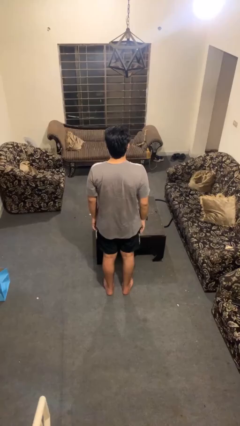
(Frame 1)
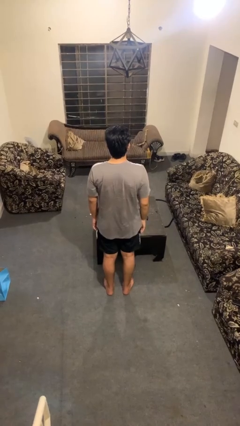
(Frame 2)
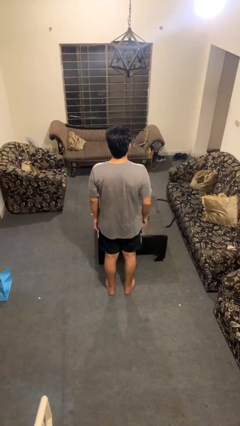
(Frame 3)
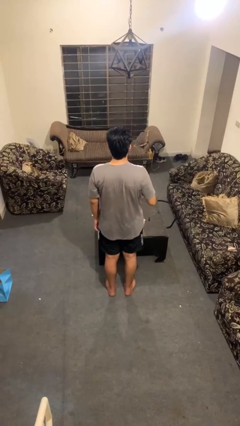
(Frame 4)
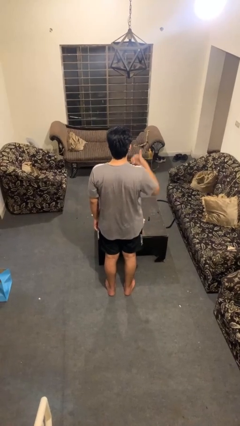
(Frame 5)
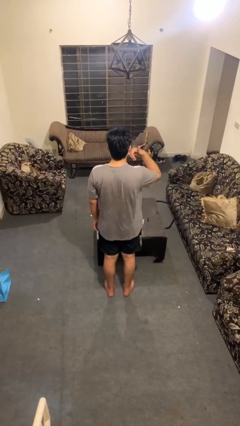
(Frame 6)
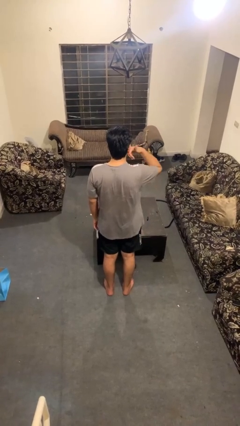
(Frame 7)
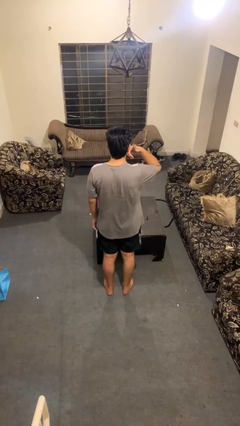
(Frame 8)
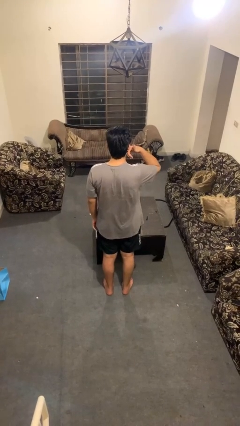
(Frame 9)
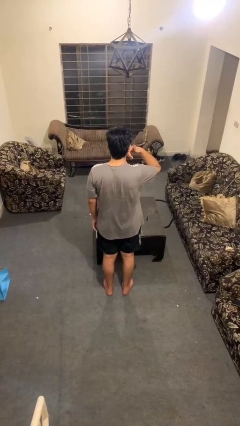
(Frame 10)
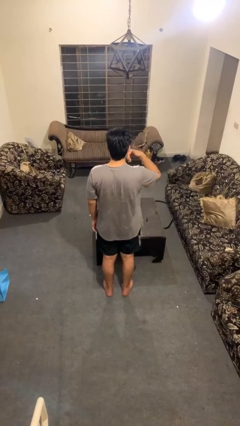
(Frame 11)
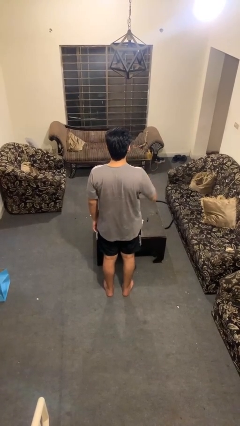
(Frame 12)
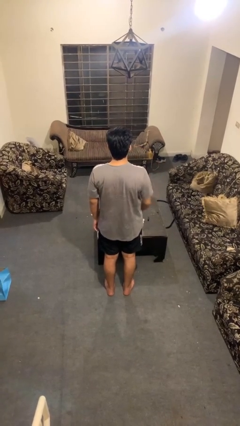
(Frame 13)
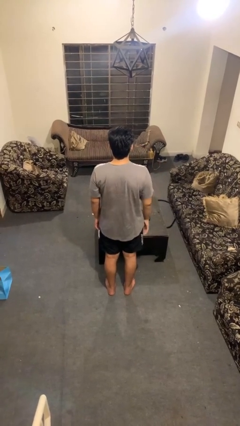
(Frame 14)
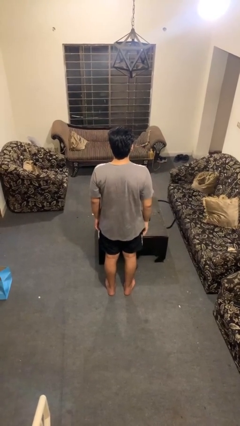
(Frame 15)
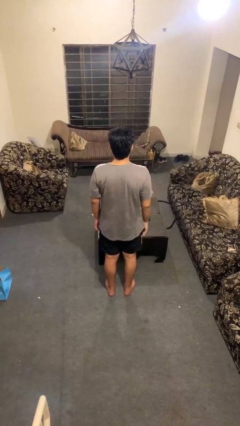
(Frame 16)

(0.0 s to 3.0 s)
person gestures call me

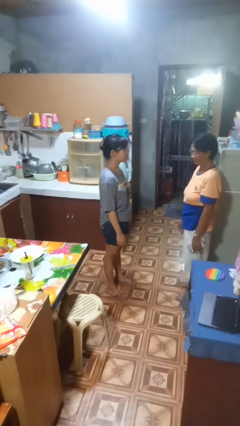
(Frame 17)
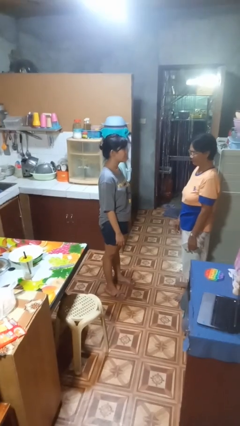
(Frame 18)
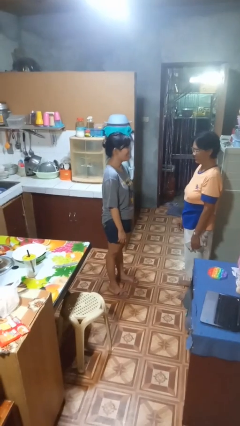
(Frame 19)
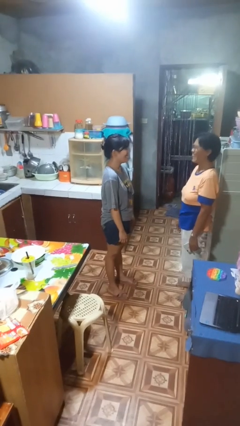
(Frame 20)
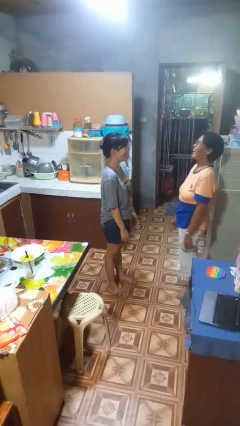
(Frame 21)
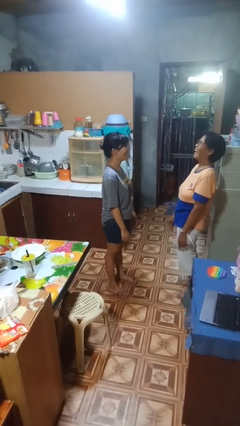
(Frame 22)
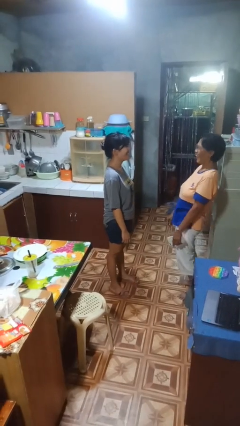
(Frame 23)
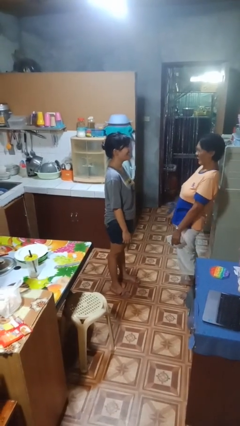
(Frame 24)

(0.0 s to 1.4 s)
person laughs with person

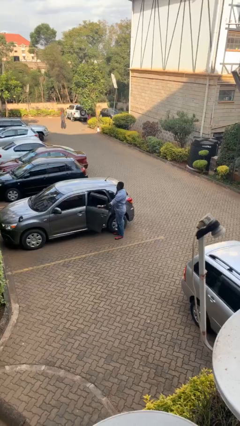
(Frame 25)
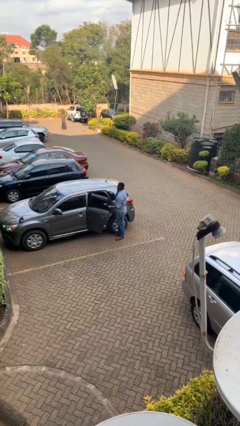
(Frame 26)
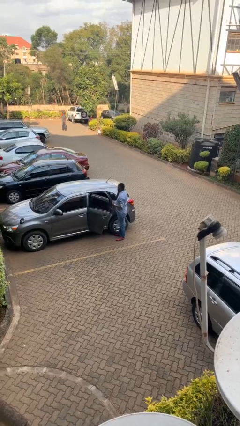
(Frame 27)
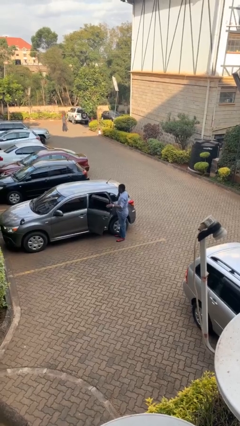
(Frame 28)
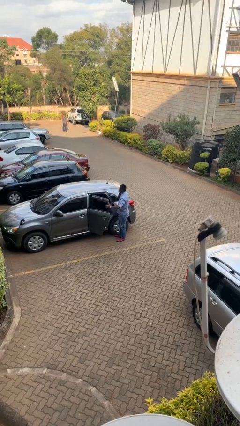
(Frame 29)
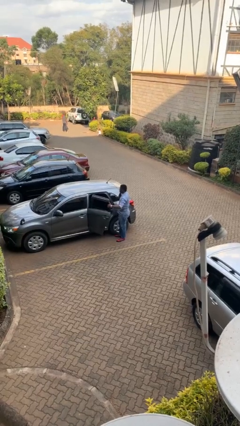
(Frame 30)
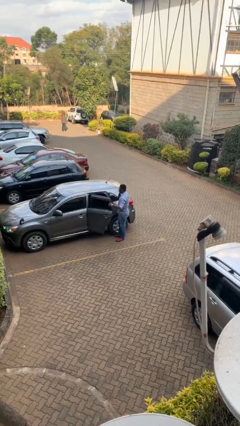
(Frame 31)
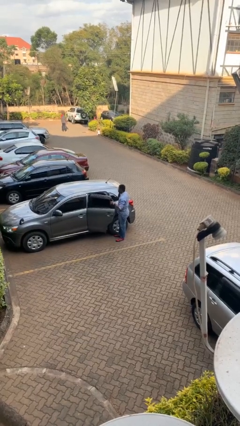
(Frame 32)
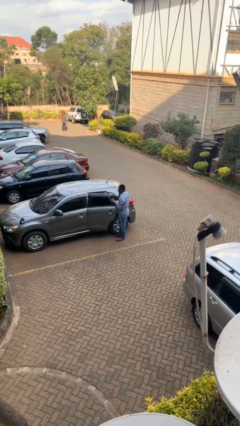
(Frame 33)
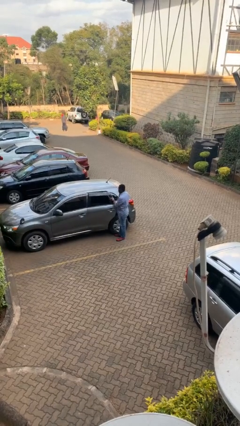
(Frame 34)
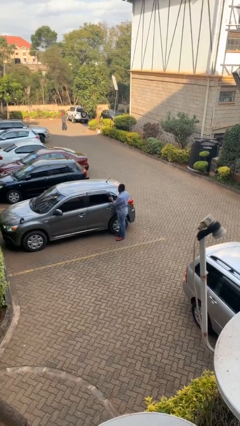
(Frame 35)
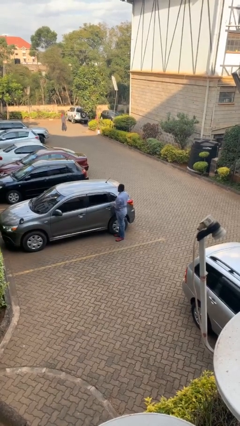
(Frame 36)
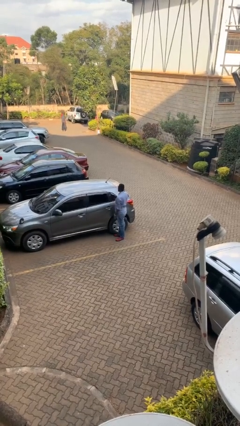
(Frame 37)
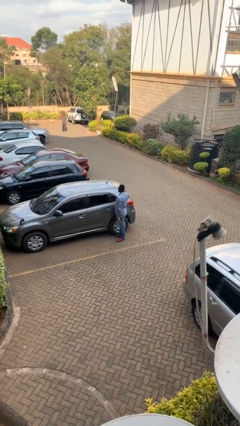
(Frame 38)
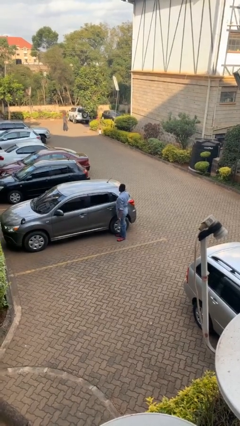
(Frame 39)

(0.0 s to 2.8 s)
person closes car door

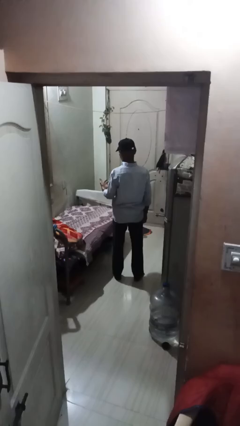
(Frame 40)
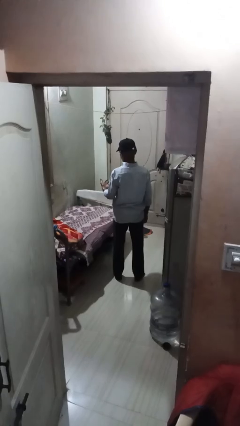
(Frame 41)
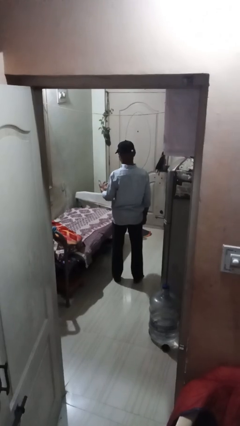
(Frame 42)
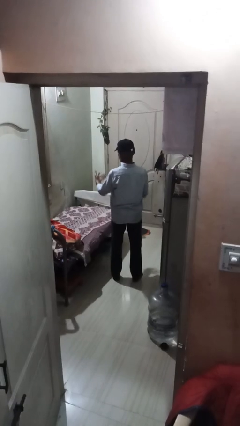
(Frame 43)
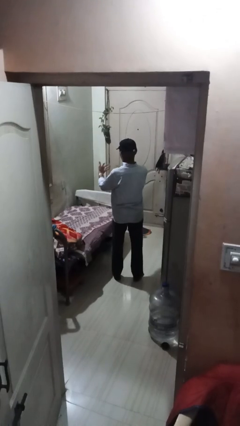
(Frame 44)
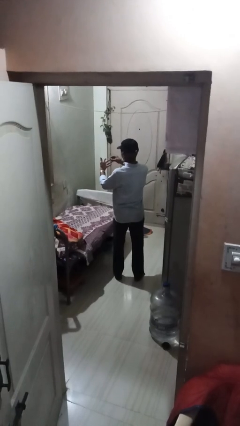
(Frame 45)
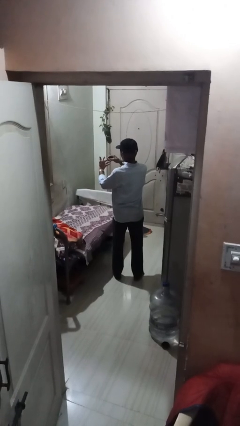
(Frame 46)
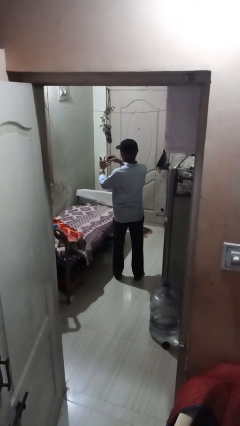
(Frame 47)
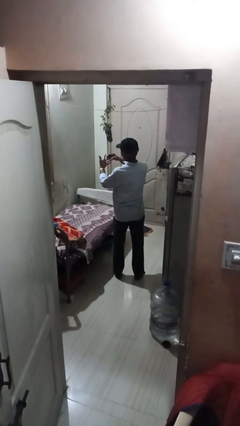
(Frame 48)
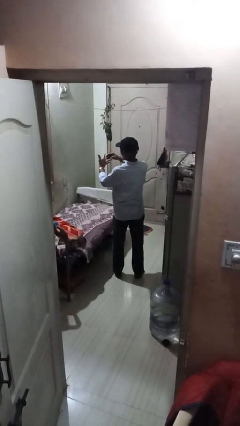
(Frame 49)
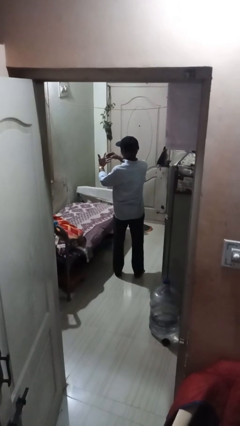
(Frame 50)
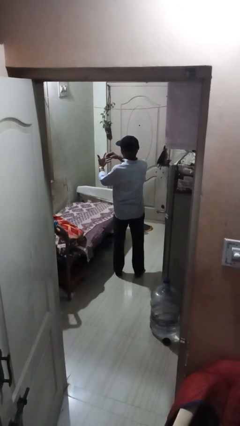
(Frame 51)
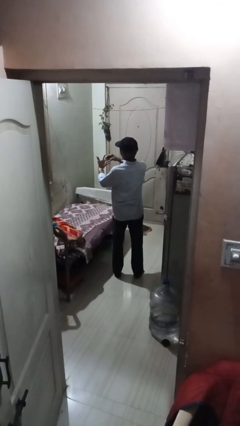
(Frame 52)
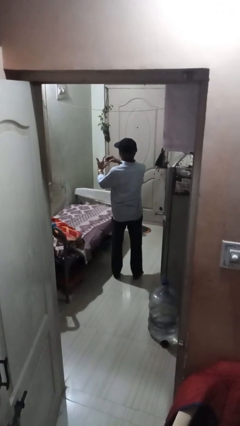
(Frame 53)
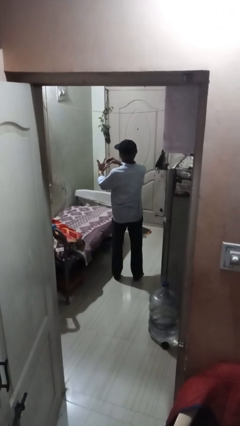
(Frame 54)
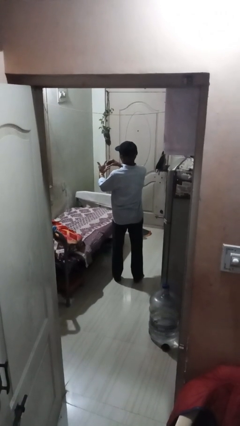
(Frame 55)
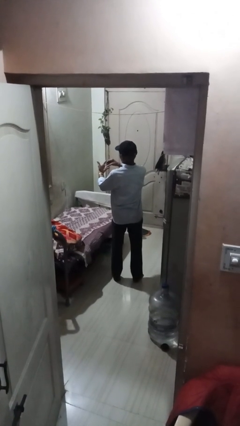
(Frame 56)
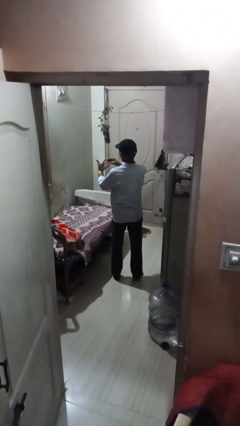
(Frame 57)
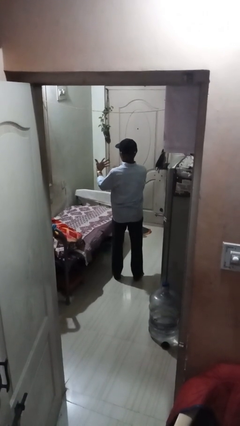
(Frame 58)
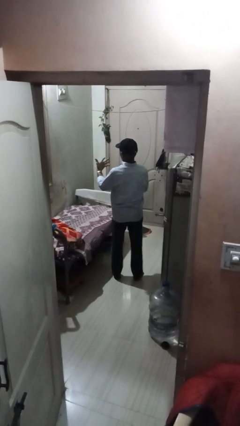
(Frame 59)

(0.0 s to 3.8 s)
person puts on ring

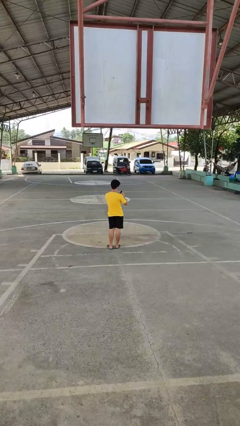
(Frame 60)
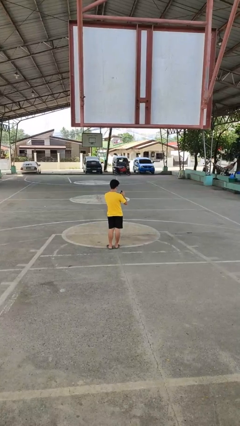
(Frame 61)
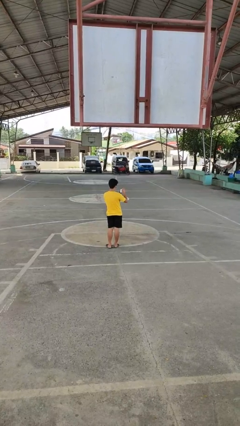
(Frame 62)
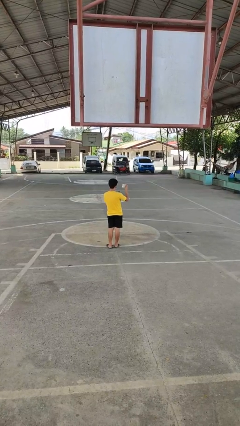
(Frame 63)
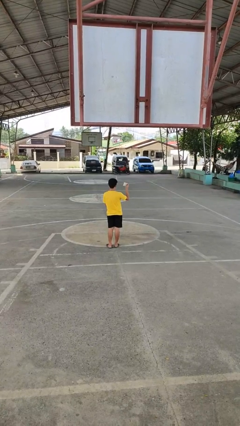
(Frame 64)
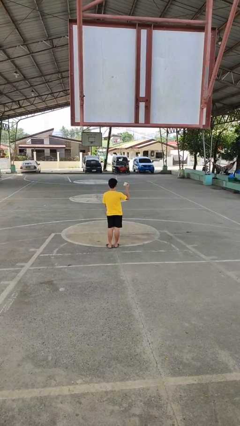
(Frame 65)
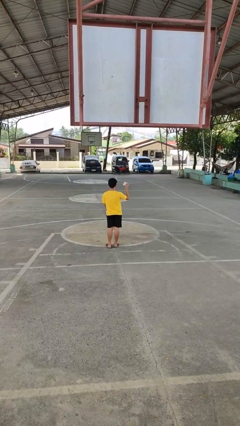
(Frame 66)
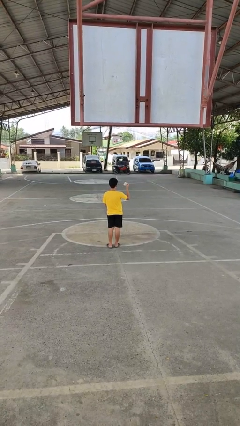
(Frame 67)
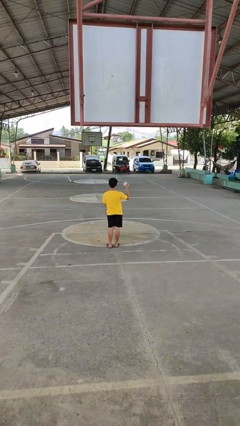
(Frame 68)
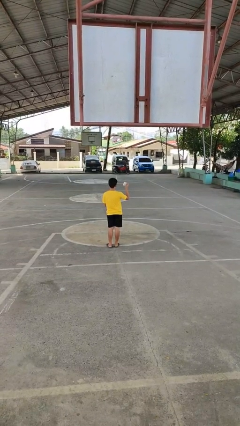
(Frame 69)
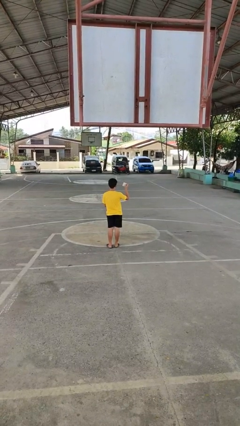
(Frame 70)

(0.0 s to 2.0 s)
person takes object from purse

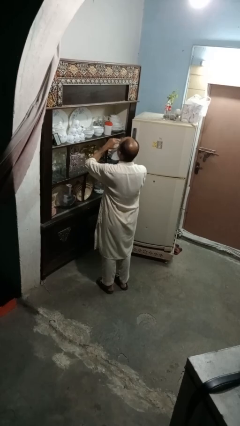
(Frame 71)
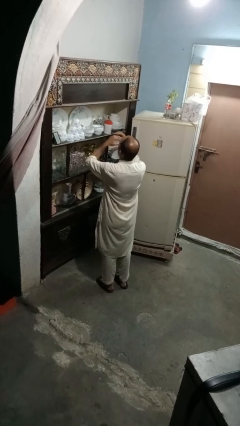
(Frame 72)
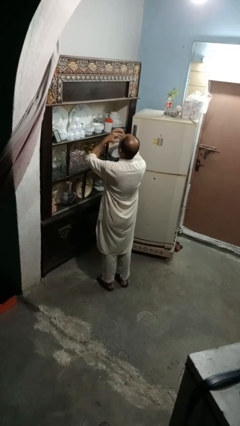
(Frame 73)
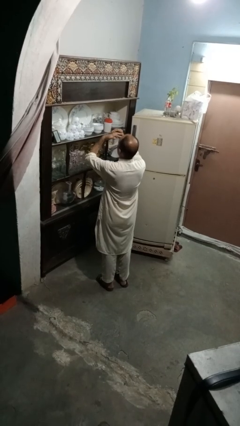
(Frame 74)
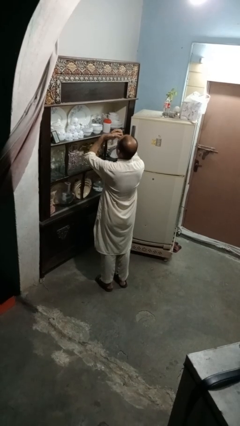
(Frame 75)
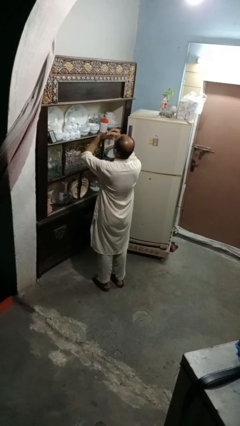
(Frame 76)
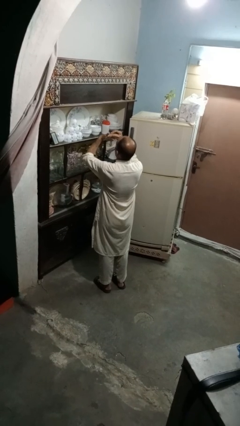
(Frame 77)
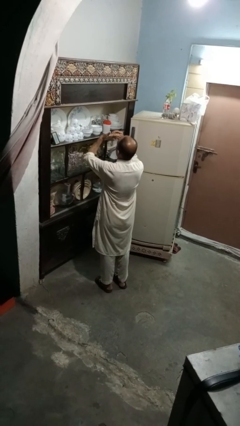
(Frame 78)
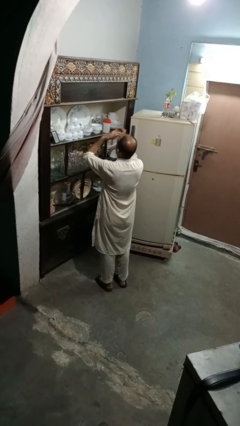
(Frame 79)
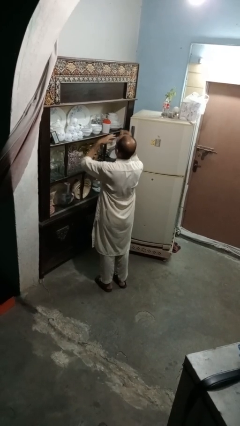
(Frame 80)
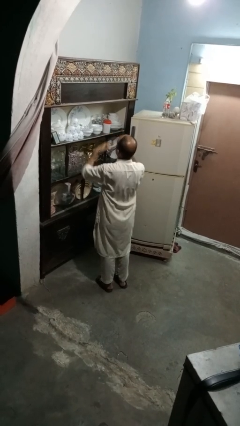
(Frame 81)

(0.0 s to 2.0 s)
person takes off ring

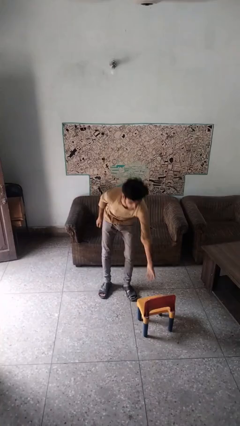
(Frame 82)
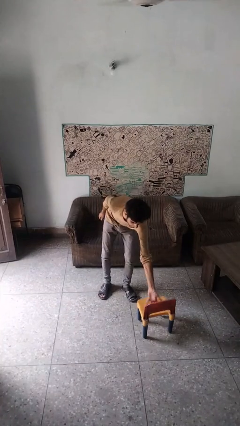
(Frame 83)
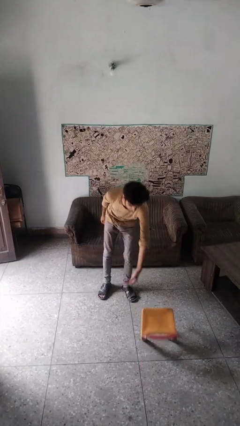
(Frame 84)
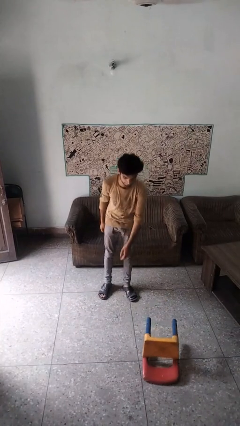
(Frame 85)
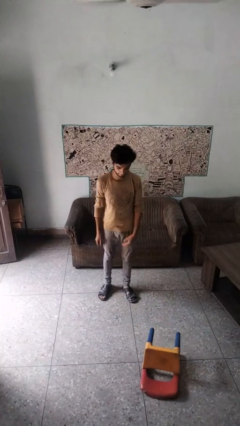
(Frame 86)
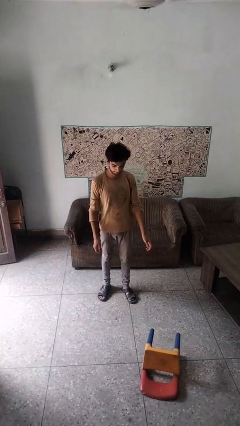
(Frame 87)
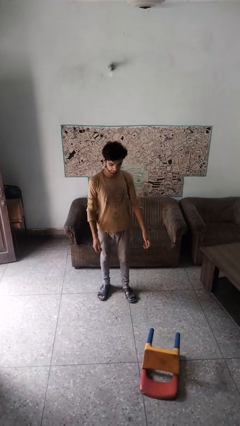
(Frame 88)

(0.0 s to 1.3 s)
person knocks over furniture

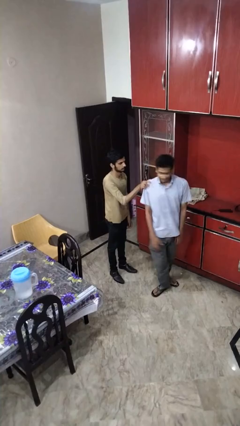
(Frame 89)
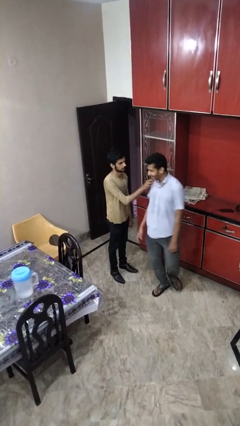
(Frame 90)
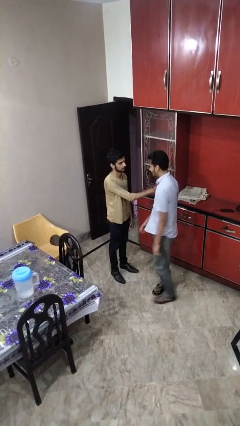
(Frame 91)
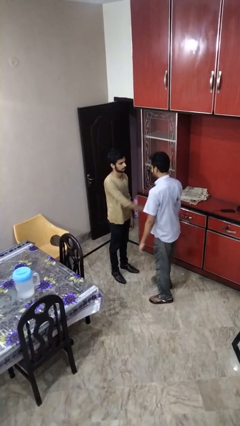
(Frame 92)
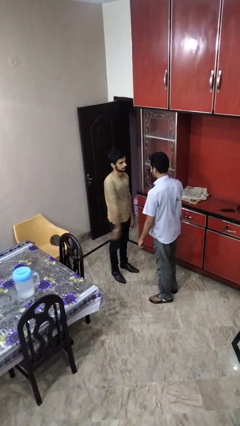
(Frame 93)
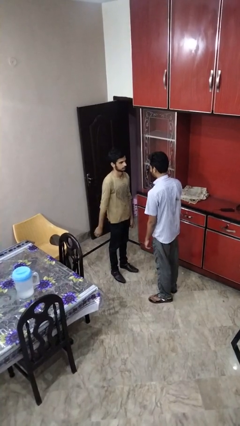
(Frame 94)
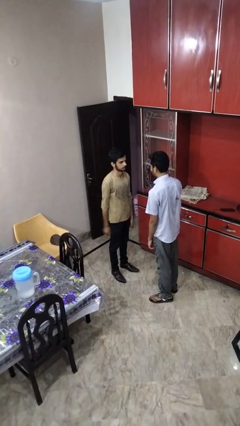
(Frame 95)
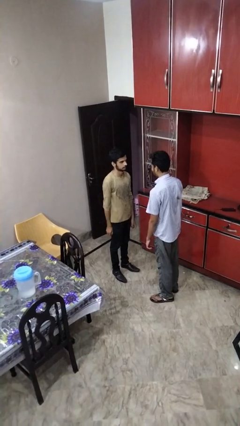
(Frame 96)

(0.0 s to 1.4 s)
person spins person around
